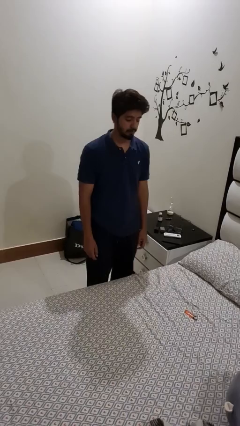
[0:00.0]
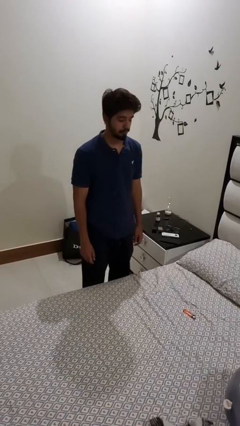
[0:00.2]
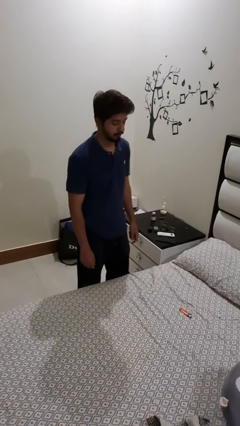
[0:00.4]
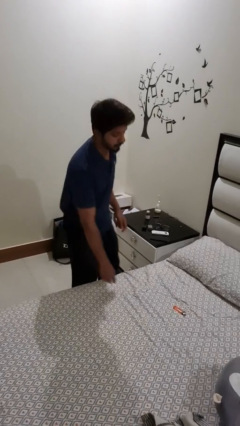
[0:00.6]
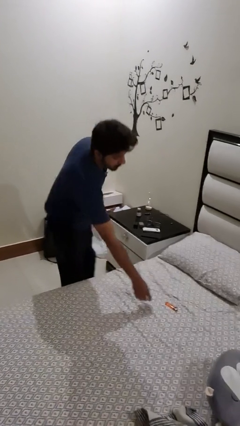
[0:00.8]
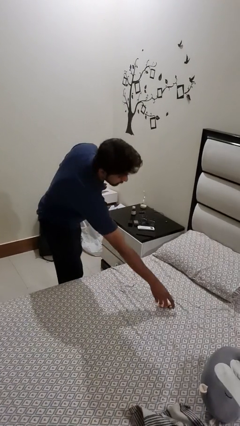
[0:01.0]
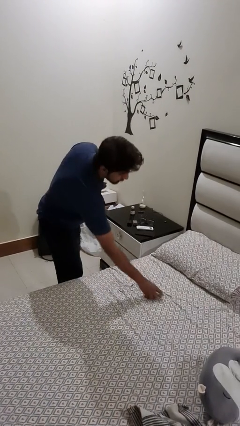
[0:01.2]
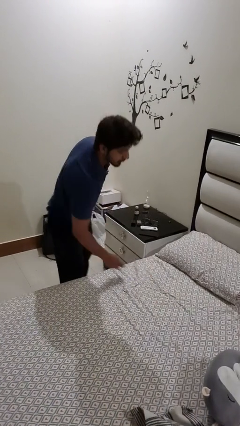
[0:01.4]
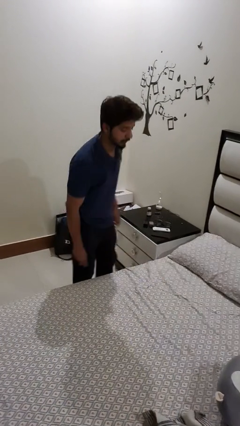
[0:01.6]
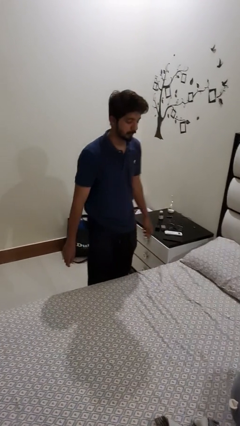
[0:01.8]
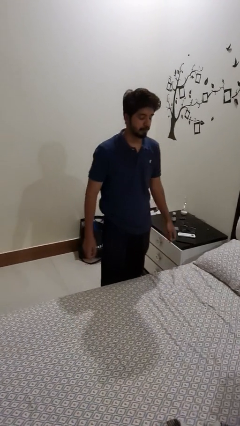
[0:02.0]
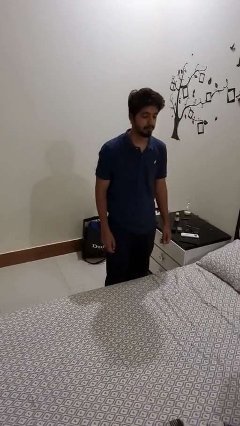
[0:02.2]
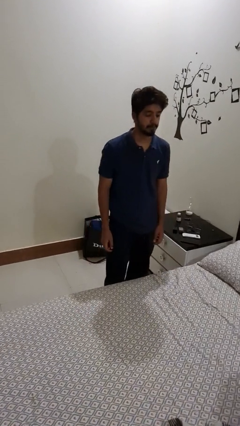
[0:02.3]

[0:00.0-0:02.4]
person picks up object from bed

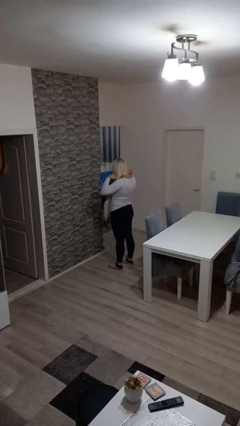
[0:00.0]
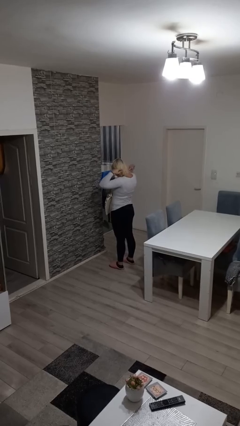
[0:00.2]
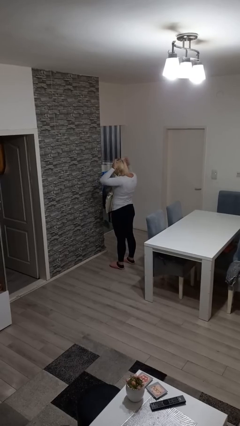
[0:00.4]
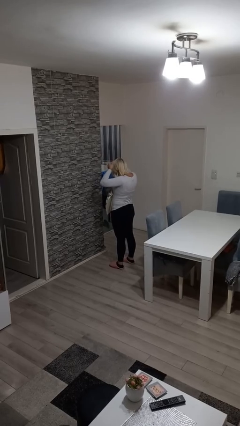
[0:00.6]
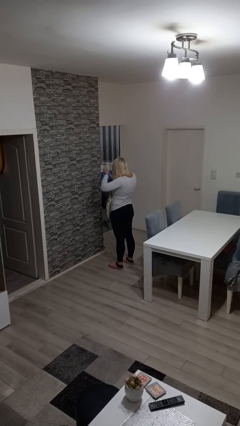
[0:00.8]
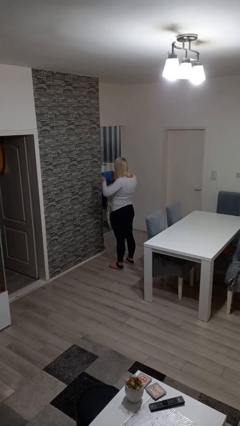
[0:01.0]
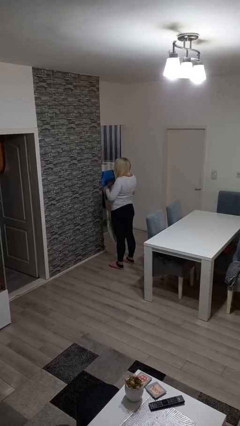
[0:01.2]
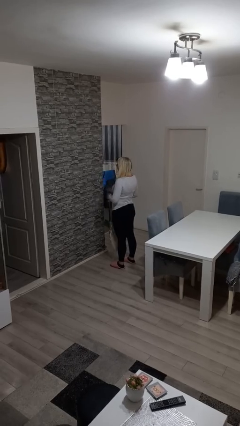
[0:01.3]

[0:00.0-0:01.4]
person takes off apron

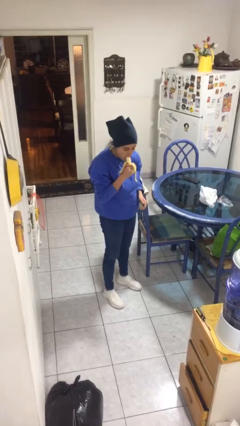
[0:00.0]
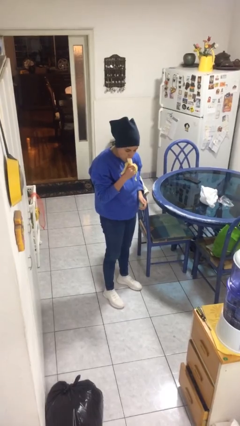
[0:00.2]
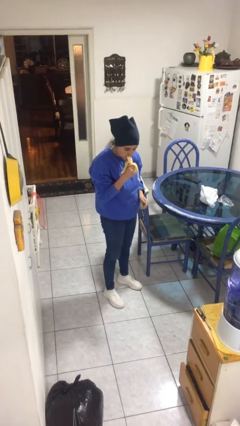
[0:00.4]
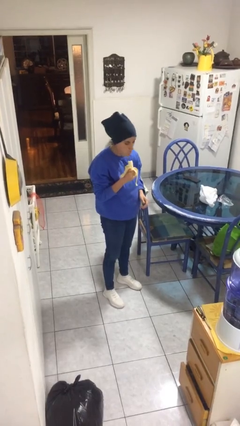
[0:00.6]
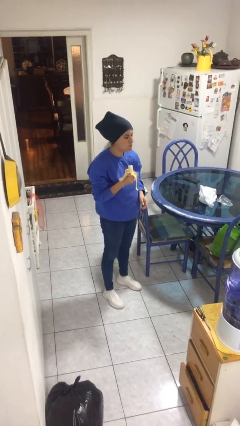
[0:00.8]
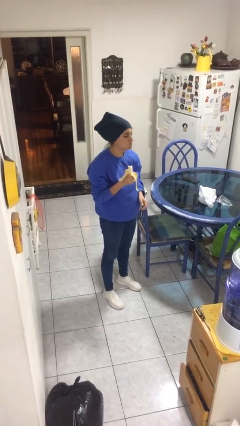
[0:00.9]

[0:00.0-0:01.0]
person eats banana

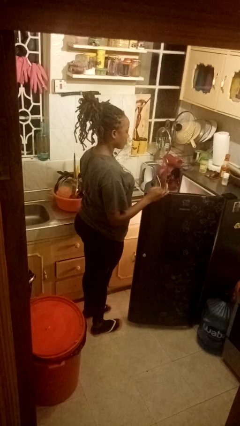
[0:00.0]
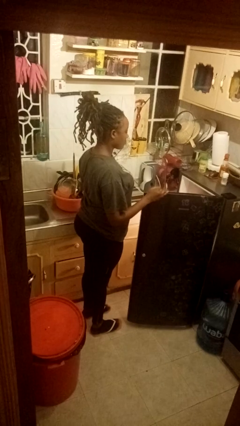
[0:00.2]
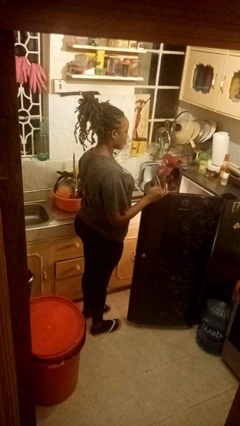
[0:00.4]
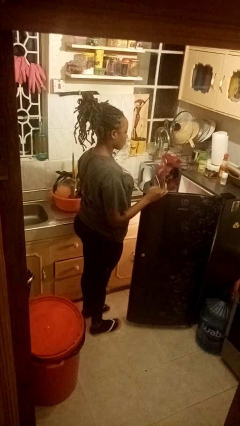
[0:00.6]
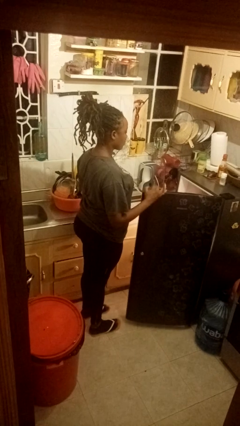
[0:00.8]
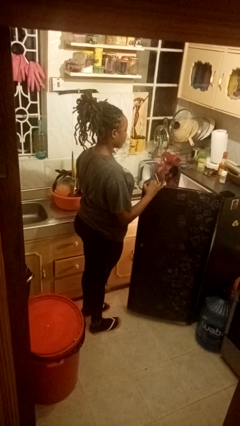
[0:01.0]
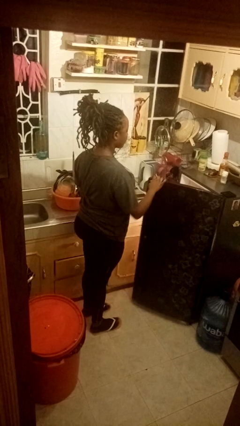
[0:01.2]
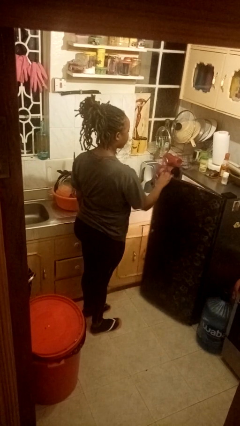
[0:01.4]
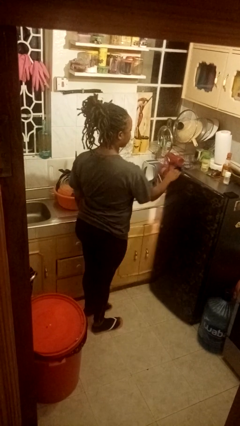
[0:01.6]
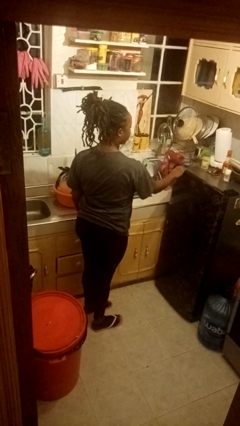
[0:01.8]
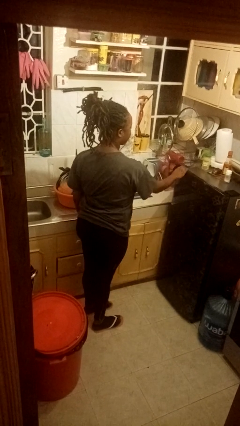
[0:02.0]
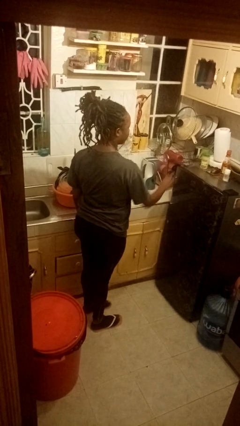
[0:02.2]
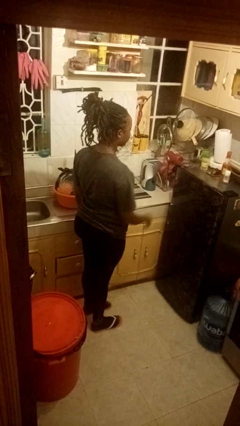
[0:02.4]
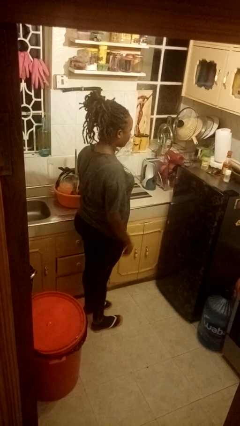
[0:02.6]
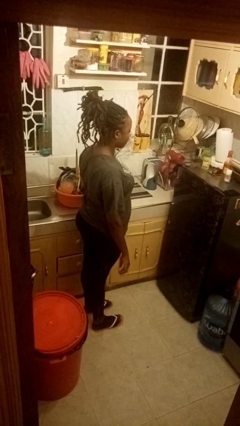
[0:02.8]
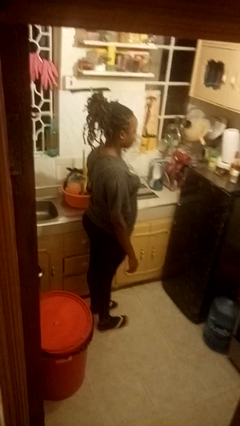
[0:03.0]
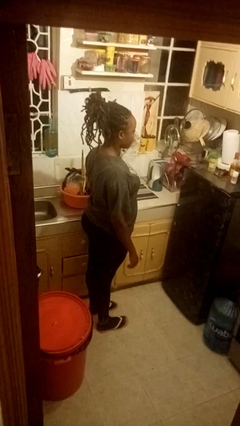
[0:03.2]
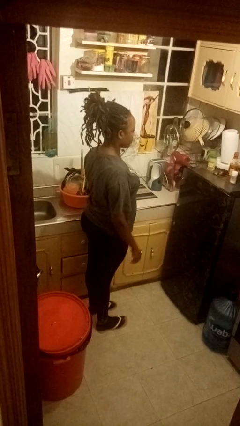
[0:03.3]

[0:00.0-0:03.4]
person closes refrigerator

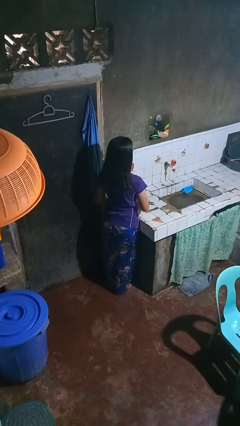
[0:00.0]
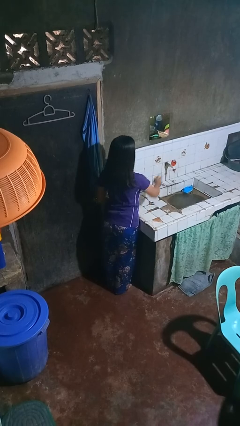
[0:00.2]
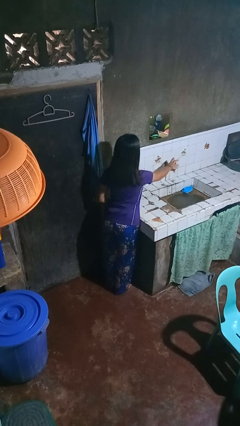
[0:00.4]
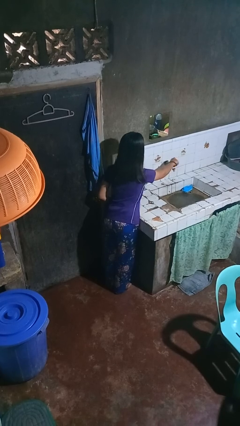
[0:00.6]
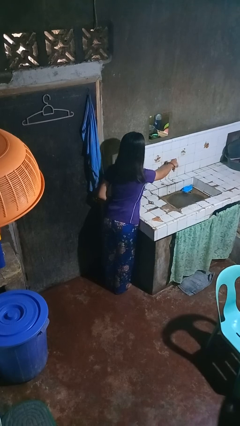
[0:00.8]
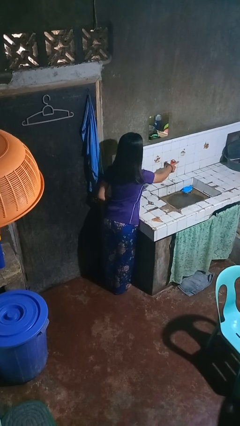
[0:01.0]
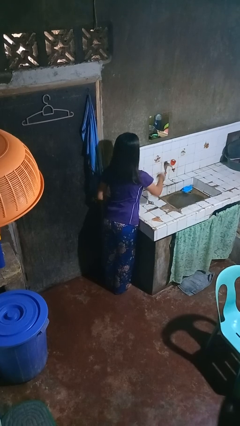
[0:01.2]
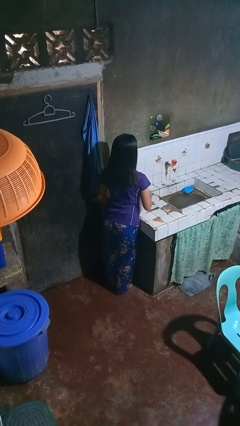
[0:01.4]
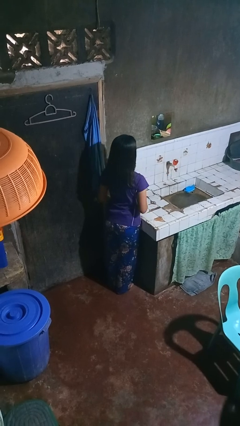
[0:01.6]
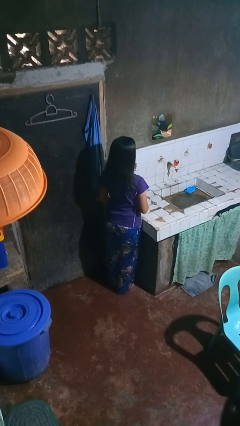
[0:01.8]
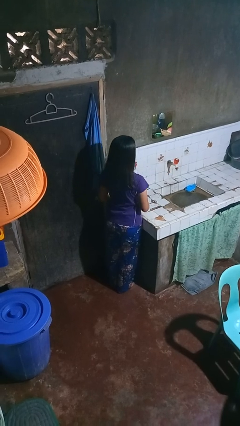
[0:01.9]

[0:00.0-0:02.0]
person turns off faucet

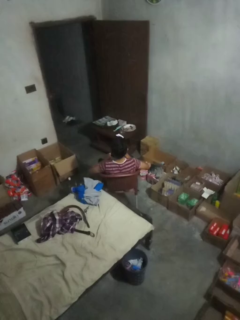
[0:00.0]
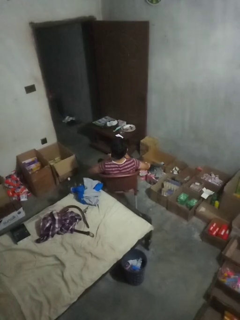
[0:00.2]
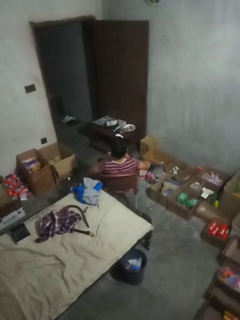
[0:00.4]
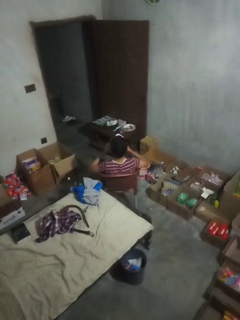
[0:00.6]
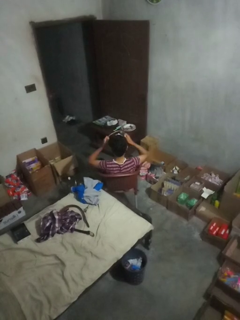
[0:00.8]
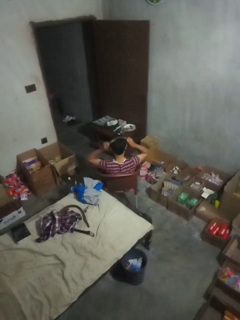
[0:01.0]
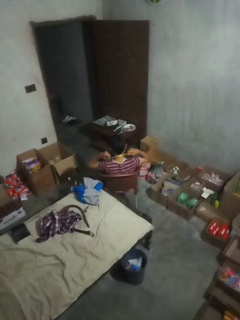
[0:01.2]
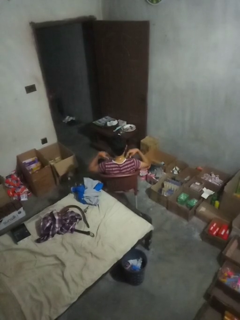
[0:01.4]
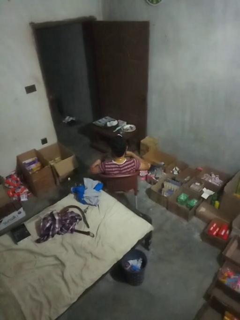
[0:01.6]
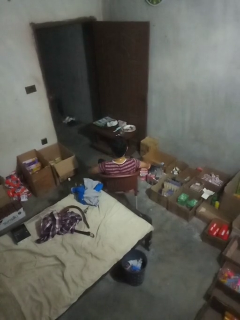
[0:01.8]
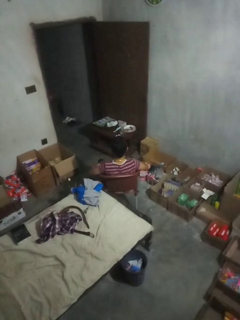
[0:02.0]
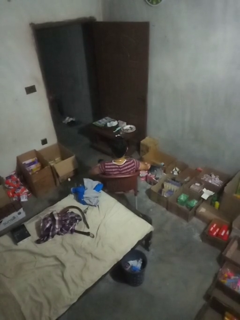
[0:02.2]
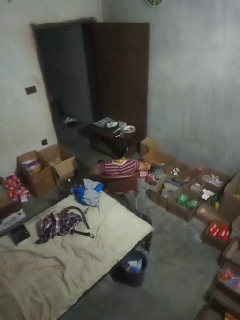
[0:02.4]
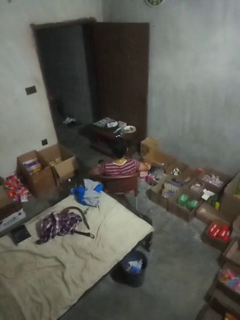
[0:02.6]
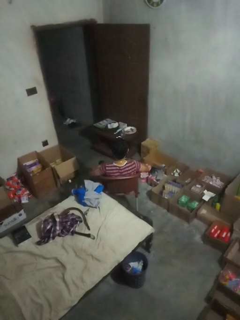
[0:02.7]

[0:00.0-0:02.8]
person puts on necklace

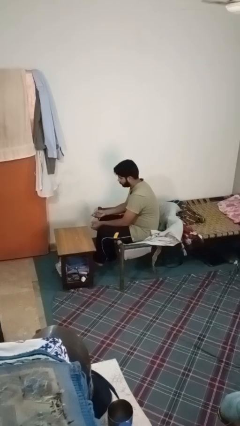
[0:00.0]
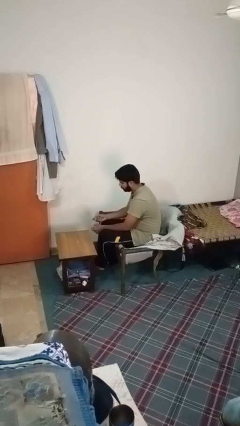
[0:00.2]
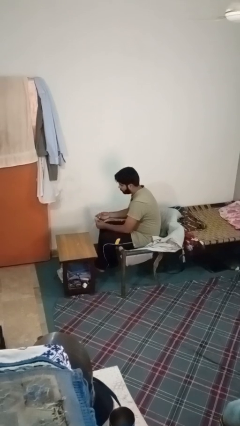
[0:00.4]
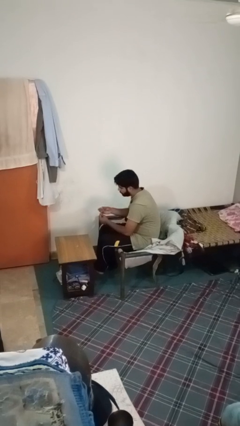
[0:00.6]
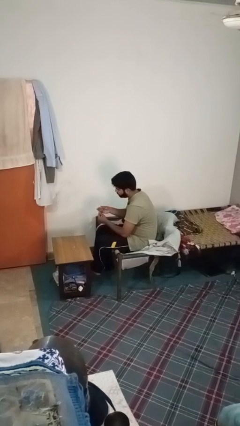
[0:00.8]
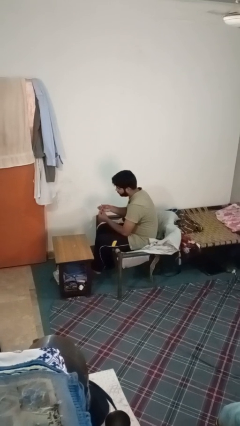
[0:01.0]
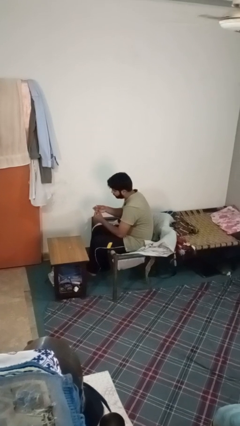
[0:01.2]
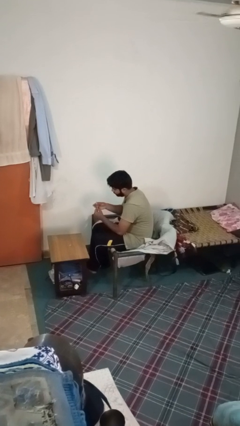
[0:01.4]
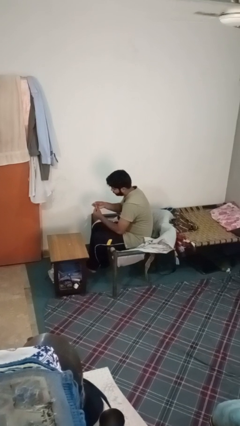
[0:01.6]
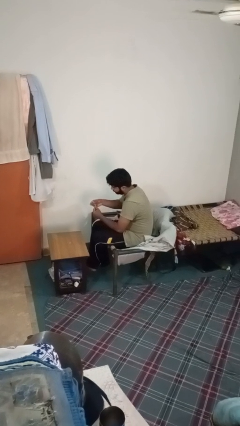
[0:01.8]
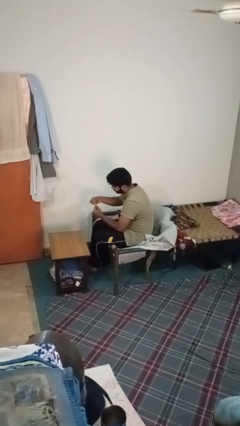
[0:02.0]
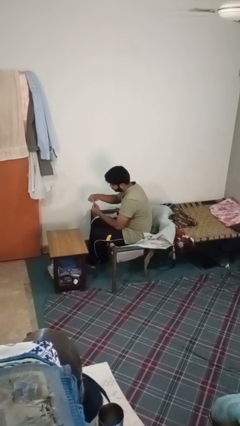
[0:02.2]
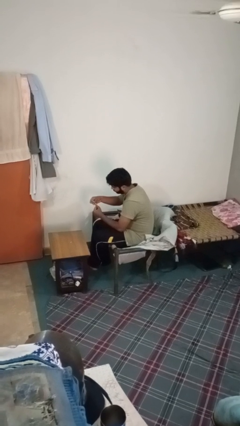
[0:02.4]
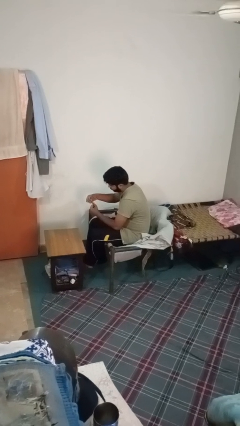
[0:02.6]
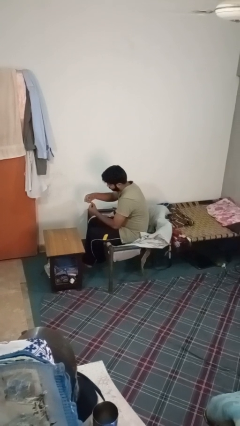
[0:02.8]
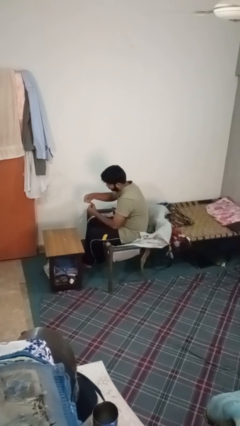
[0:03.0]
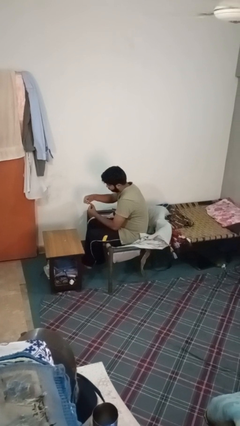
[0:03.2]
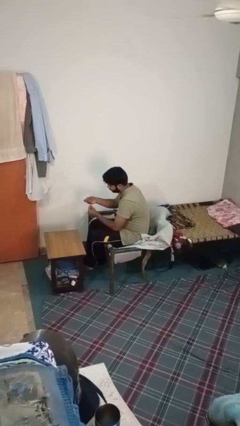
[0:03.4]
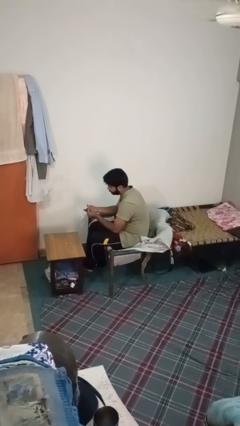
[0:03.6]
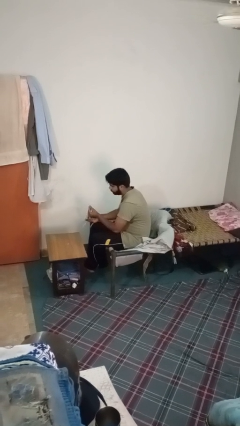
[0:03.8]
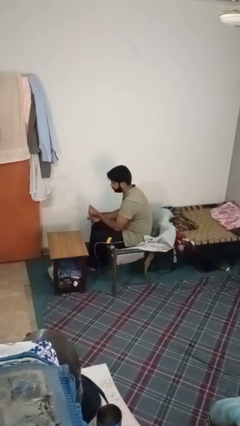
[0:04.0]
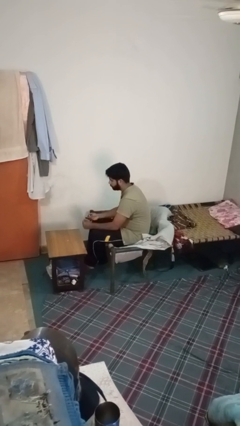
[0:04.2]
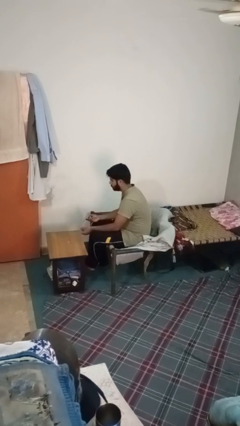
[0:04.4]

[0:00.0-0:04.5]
person clips fingernails

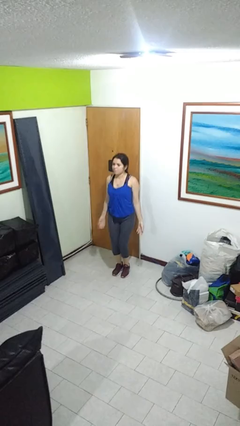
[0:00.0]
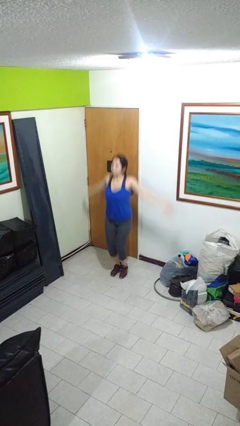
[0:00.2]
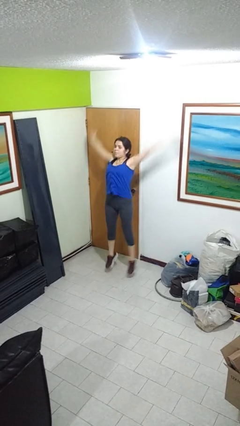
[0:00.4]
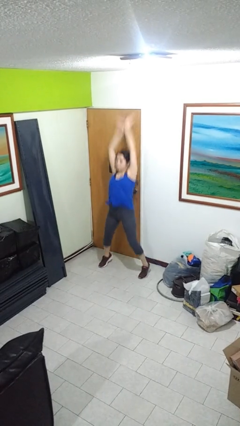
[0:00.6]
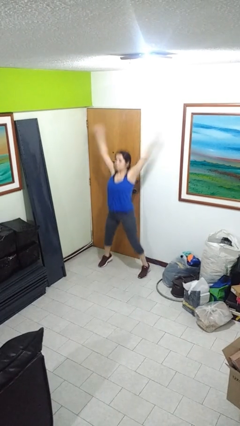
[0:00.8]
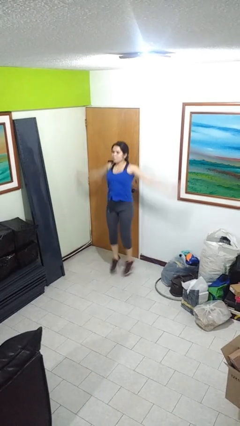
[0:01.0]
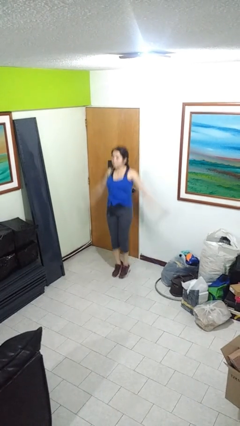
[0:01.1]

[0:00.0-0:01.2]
person exercises with jumping jacks
